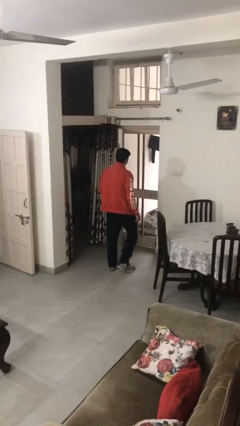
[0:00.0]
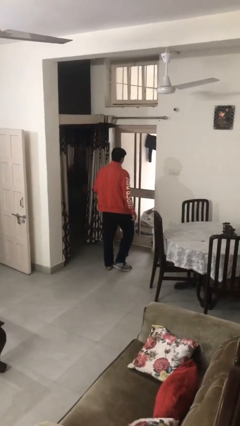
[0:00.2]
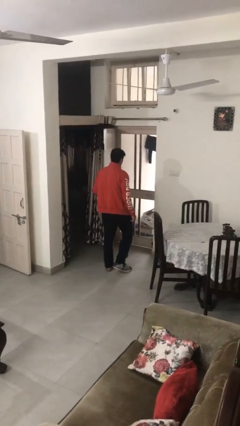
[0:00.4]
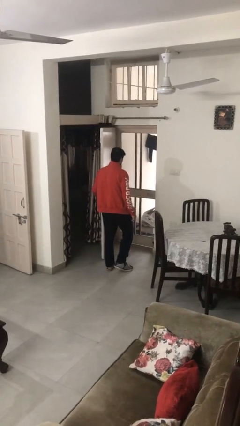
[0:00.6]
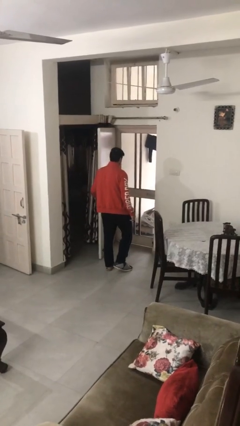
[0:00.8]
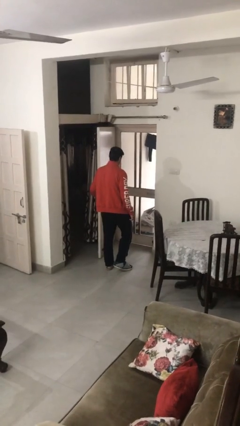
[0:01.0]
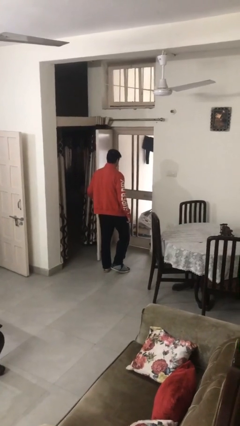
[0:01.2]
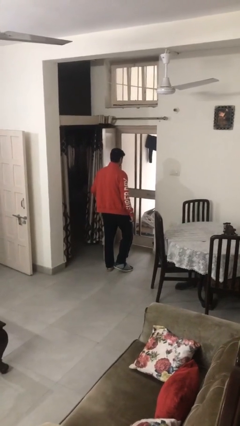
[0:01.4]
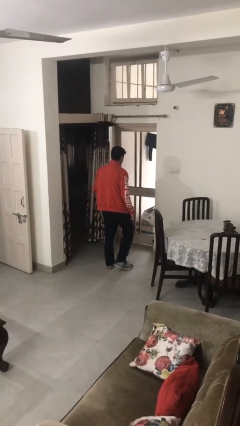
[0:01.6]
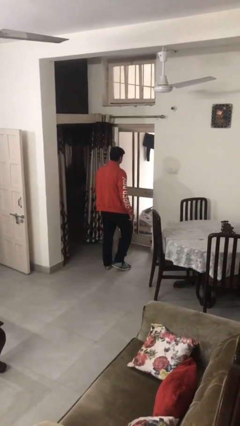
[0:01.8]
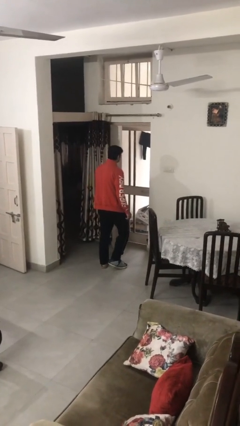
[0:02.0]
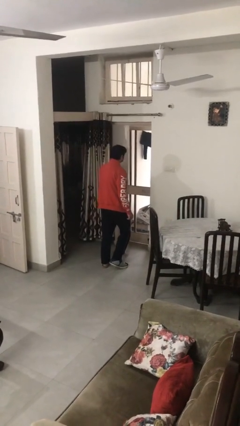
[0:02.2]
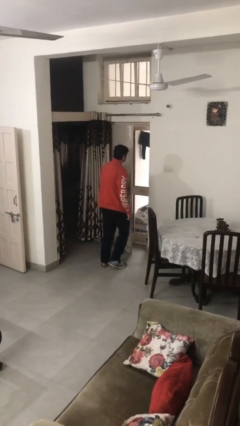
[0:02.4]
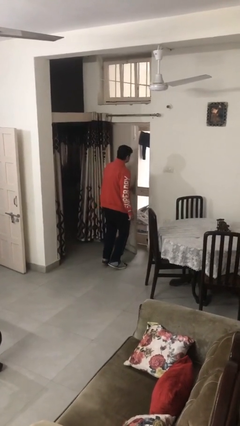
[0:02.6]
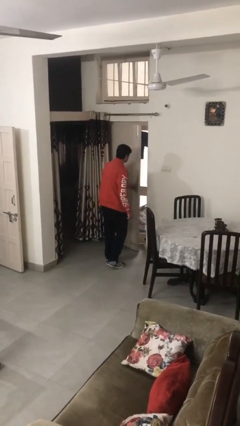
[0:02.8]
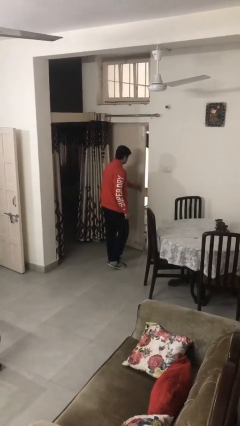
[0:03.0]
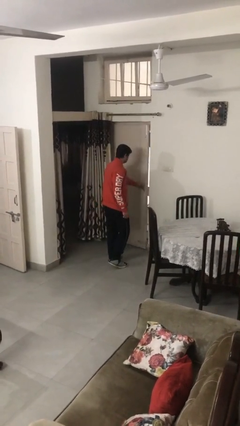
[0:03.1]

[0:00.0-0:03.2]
person closes facility door

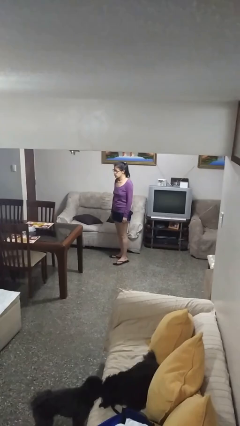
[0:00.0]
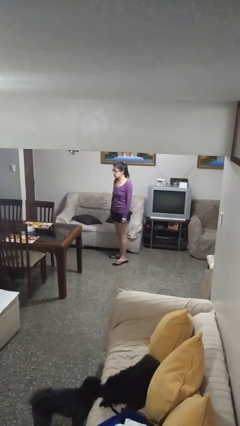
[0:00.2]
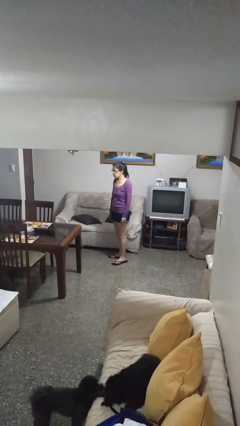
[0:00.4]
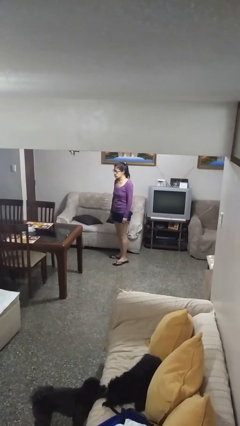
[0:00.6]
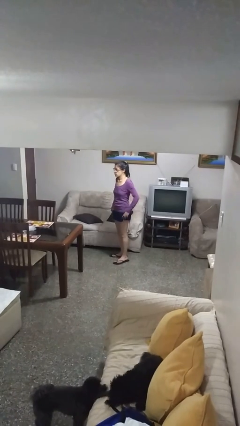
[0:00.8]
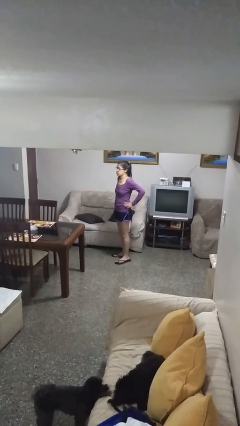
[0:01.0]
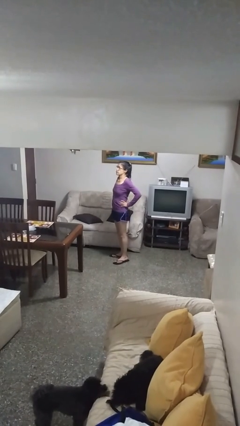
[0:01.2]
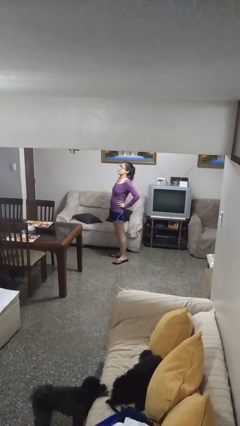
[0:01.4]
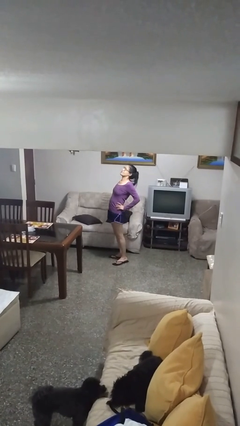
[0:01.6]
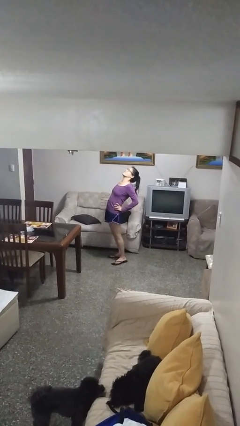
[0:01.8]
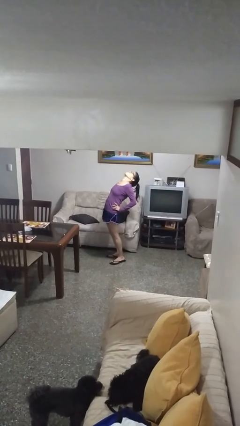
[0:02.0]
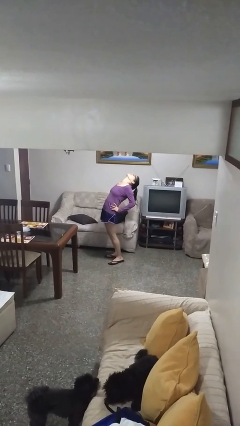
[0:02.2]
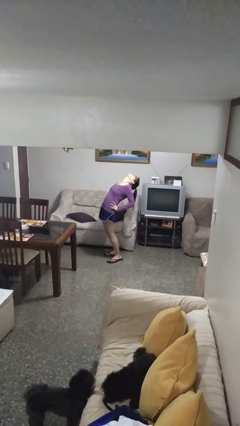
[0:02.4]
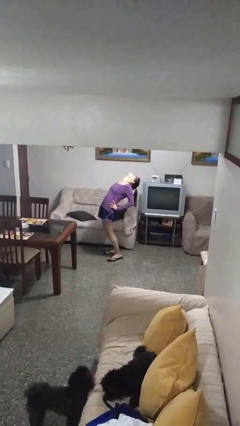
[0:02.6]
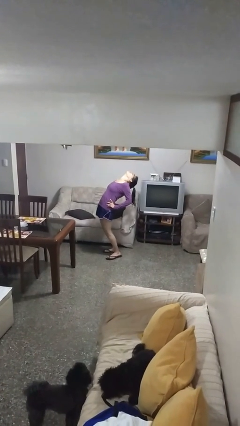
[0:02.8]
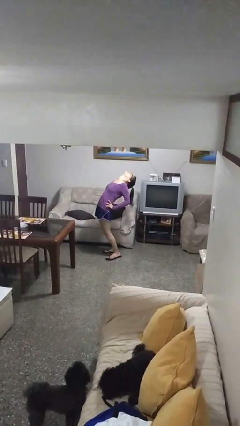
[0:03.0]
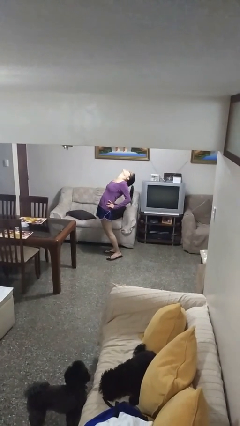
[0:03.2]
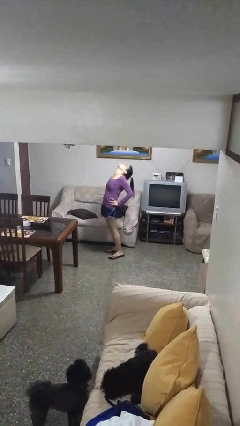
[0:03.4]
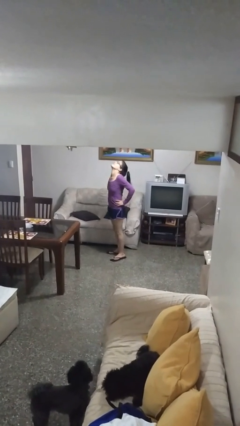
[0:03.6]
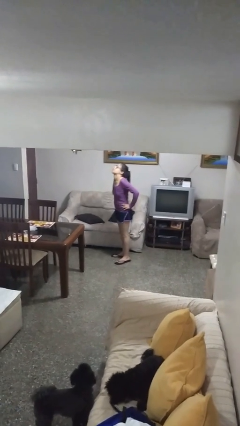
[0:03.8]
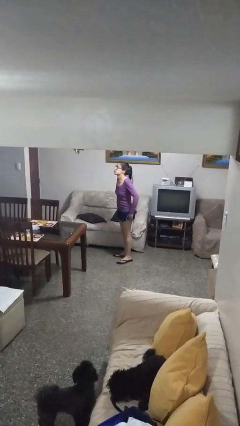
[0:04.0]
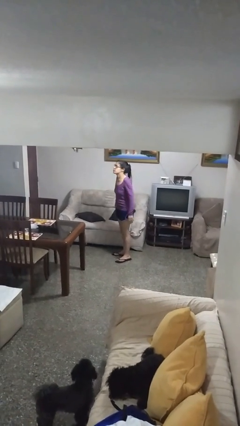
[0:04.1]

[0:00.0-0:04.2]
person stretches back

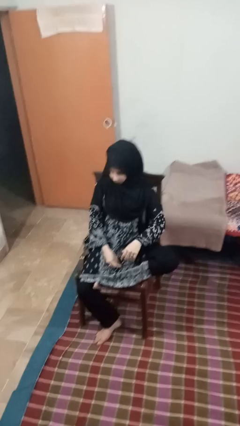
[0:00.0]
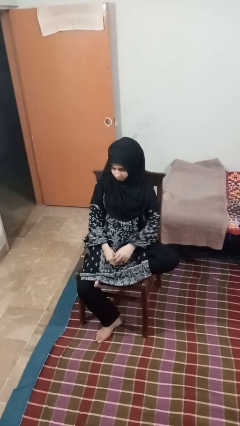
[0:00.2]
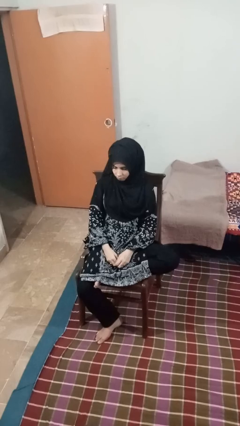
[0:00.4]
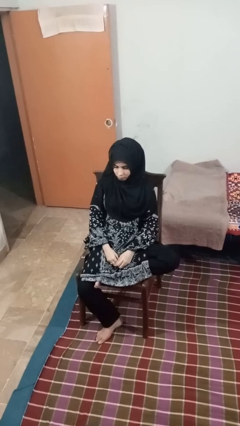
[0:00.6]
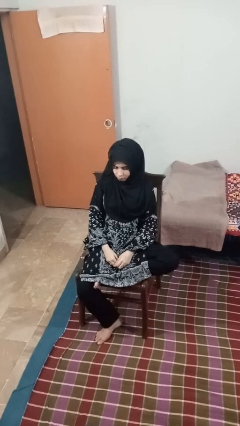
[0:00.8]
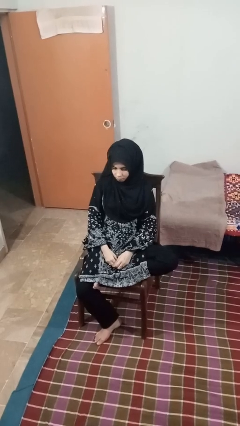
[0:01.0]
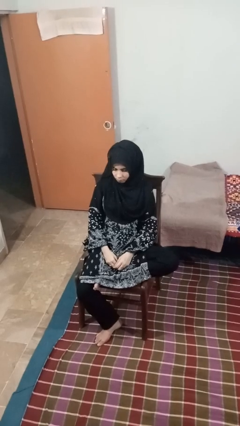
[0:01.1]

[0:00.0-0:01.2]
person swats bug

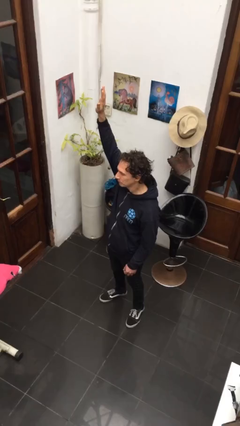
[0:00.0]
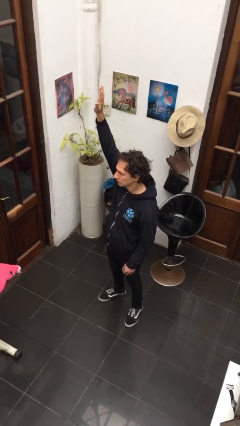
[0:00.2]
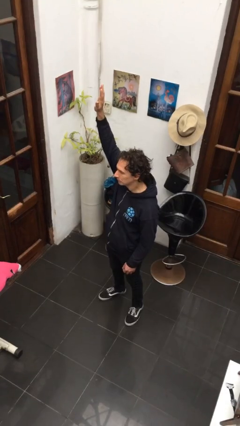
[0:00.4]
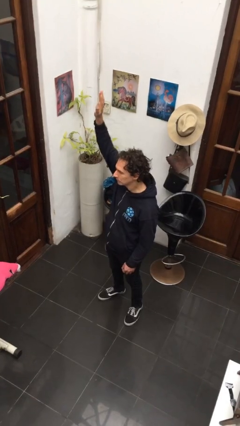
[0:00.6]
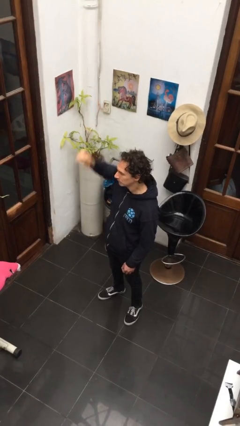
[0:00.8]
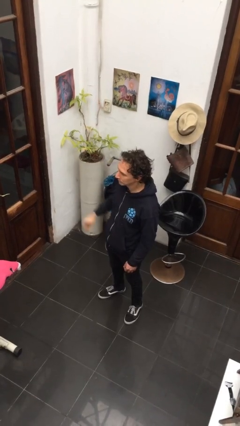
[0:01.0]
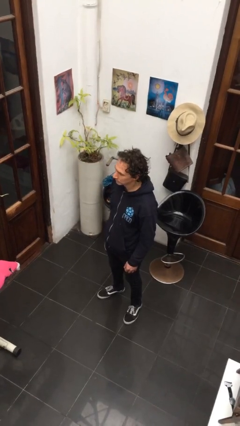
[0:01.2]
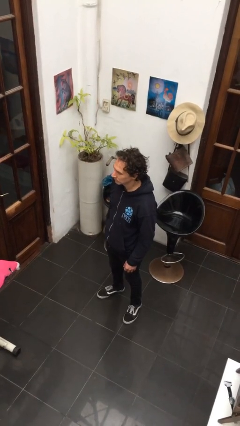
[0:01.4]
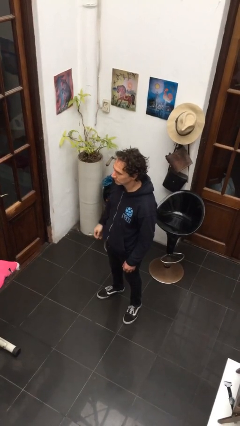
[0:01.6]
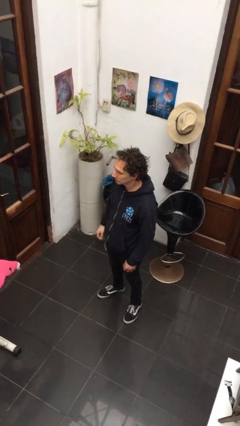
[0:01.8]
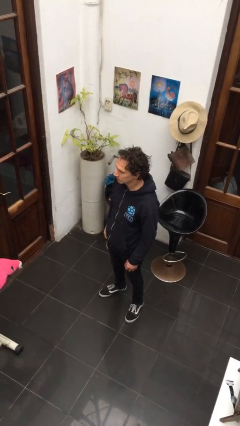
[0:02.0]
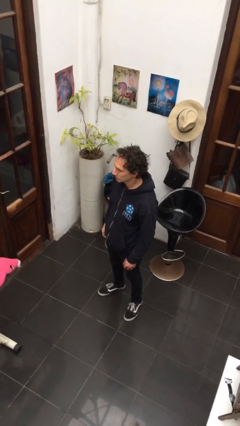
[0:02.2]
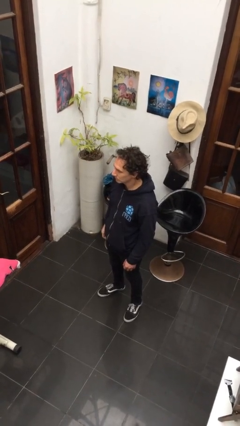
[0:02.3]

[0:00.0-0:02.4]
person gestures lower hand

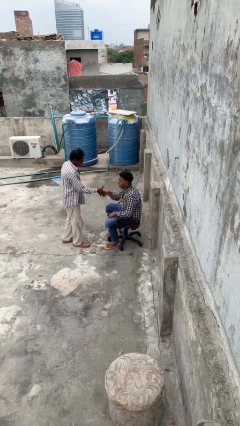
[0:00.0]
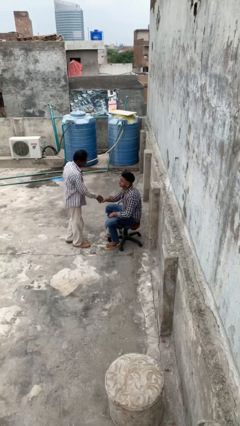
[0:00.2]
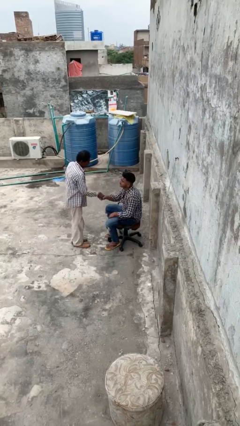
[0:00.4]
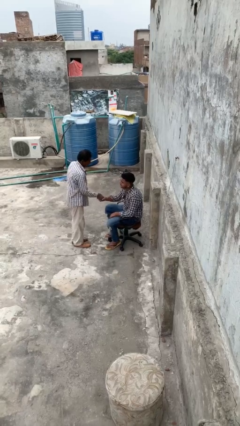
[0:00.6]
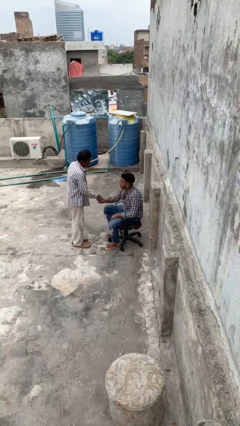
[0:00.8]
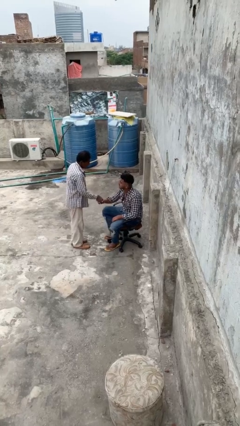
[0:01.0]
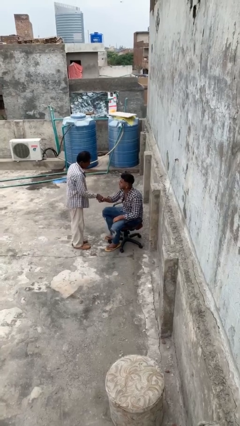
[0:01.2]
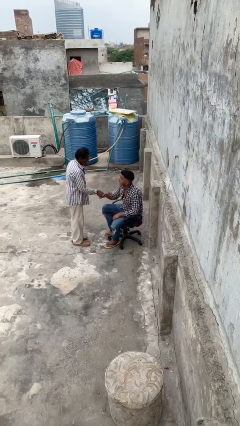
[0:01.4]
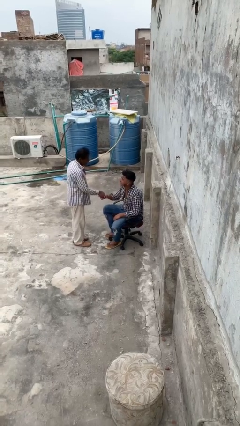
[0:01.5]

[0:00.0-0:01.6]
person shakes hand

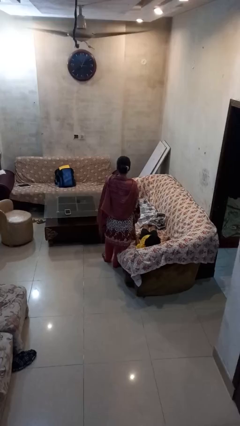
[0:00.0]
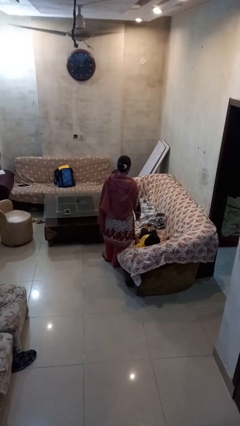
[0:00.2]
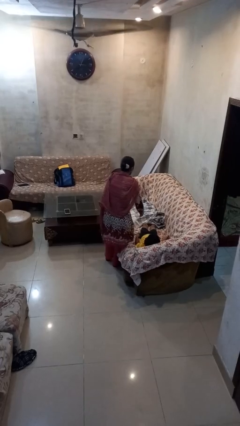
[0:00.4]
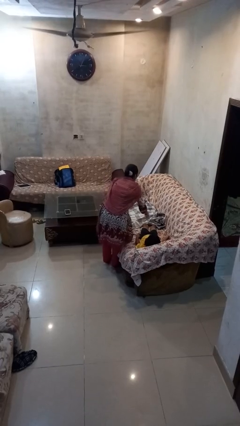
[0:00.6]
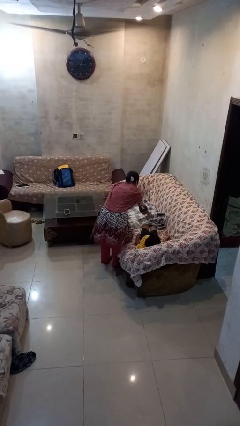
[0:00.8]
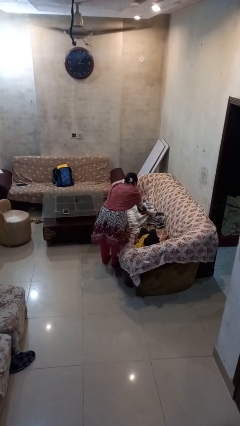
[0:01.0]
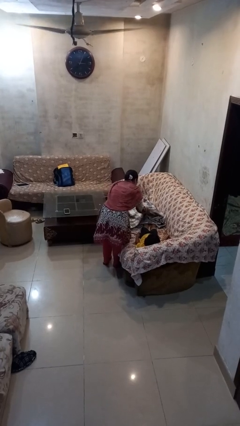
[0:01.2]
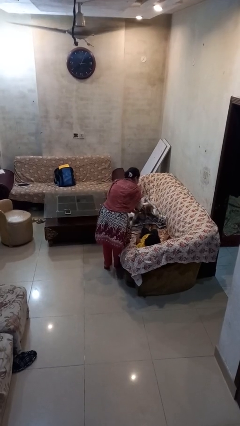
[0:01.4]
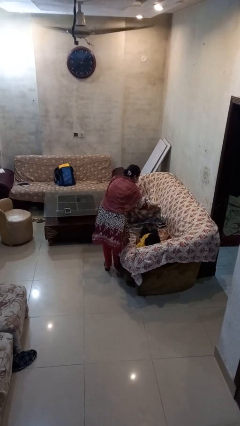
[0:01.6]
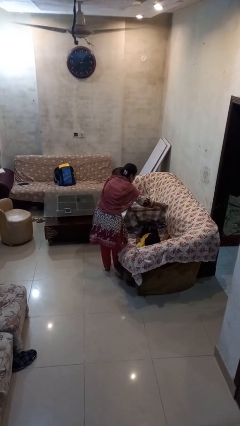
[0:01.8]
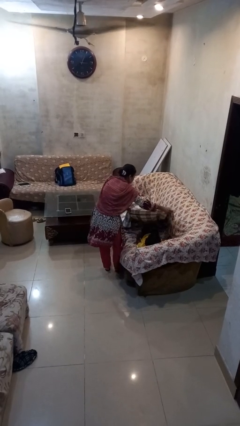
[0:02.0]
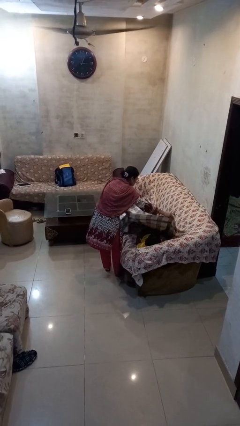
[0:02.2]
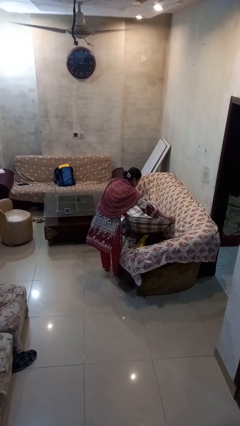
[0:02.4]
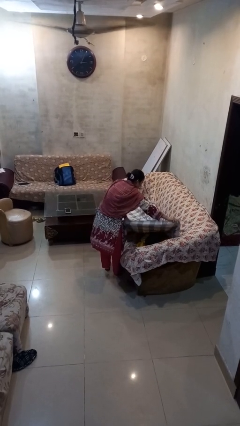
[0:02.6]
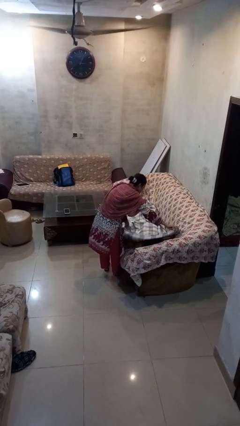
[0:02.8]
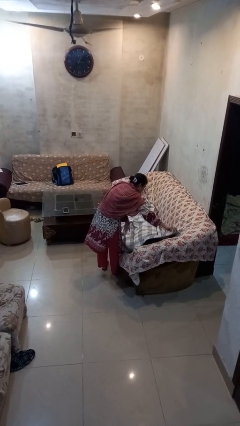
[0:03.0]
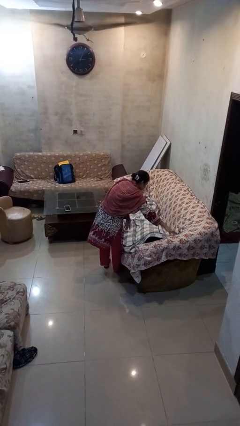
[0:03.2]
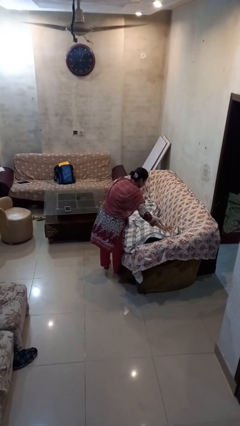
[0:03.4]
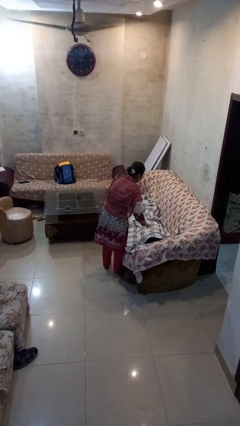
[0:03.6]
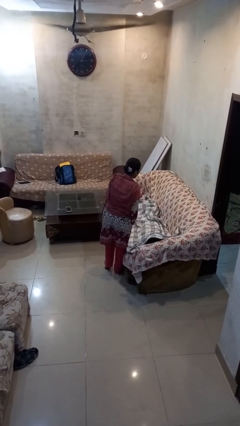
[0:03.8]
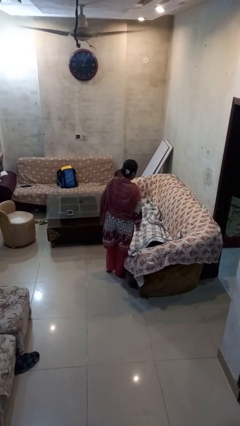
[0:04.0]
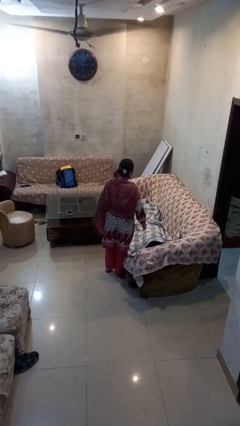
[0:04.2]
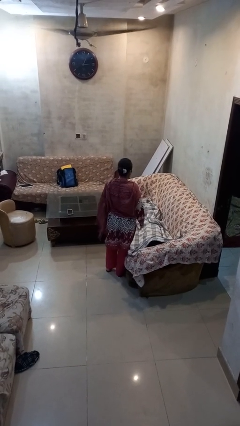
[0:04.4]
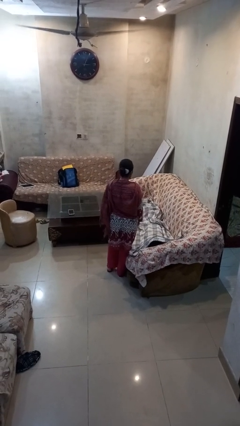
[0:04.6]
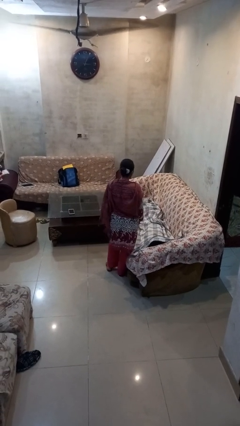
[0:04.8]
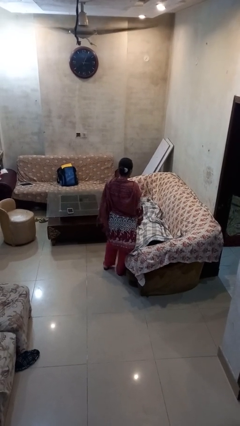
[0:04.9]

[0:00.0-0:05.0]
person covers friend with blanket
